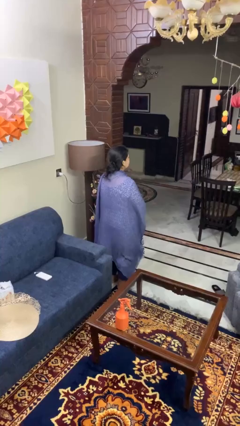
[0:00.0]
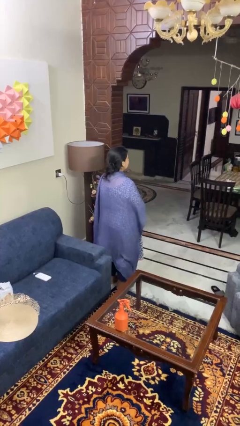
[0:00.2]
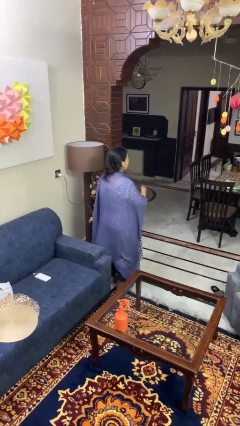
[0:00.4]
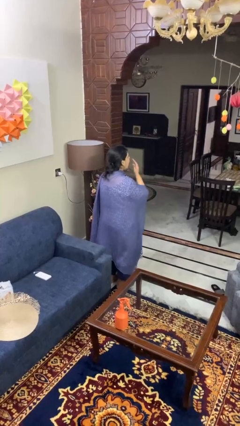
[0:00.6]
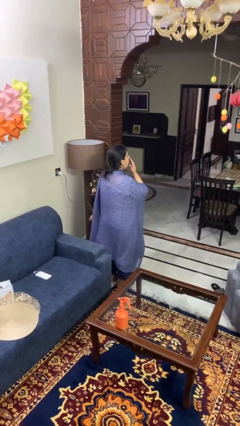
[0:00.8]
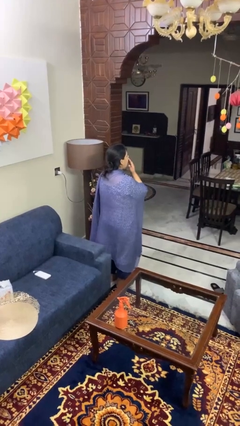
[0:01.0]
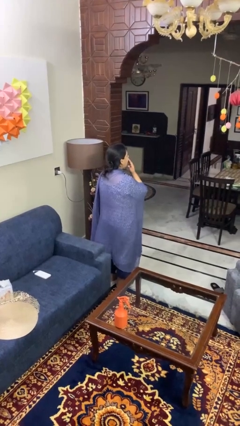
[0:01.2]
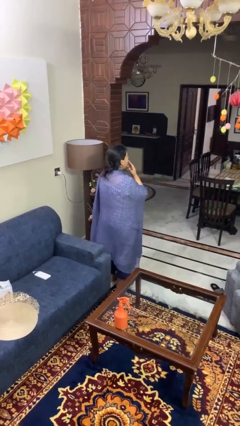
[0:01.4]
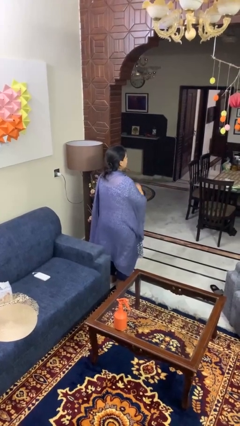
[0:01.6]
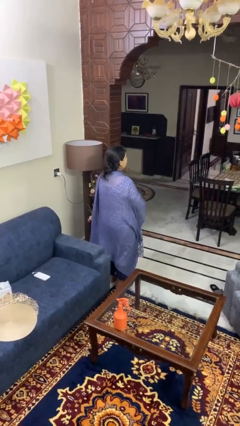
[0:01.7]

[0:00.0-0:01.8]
person yawns

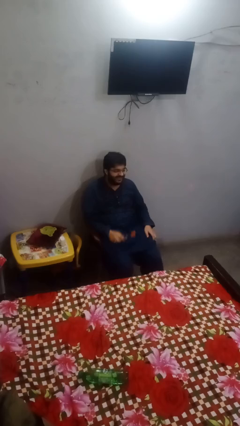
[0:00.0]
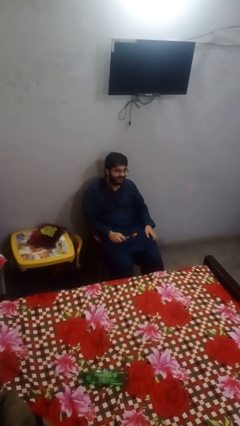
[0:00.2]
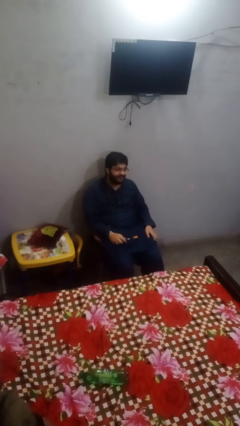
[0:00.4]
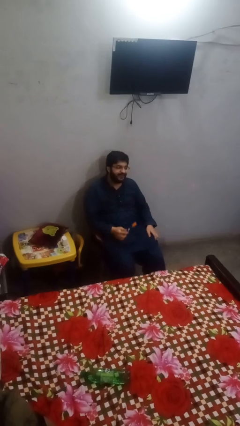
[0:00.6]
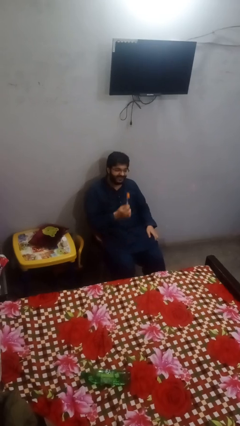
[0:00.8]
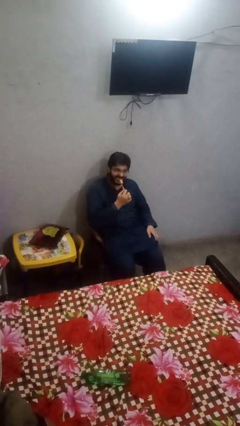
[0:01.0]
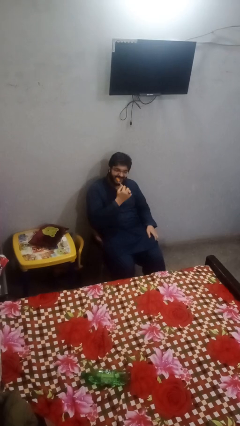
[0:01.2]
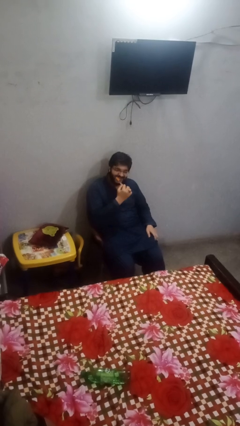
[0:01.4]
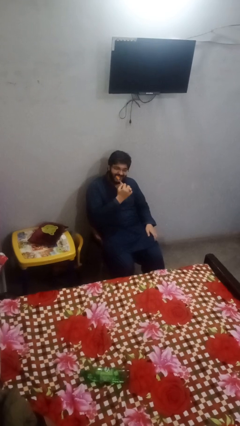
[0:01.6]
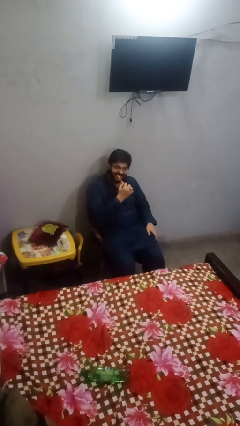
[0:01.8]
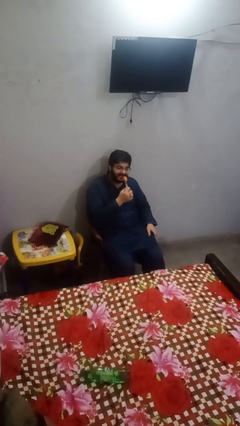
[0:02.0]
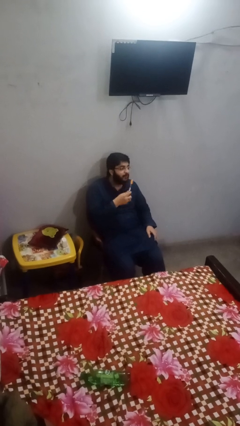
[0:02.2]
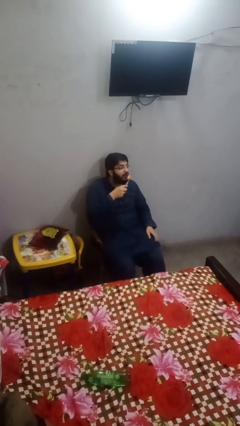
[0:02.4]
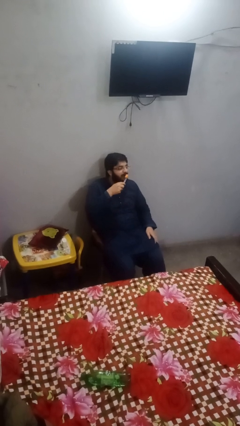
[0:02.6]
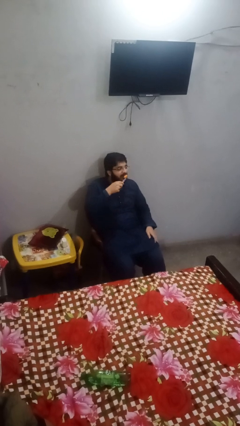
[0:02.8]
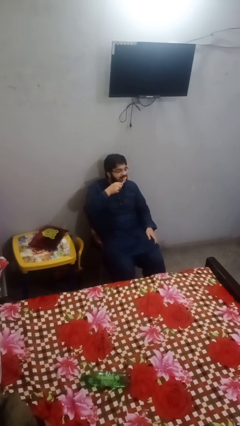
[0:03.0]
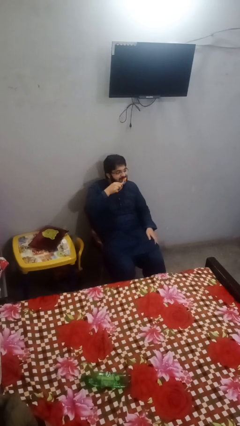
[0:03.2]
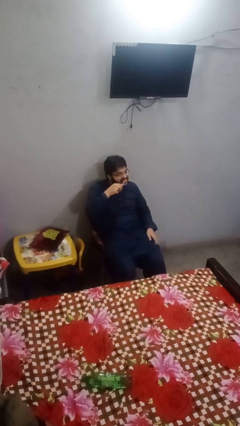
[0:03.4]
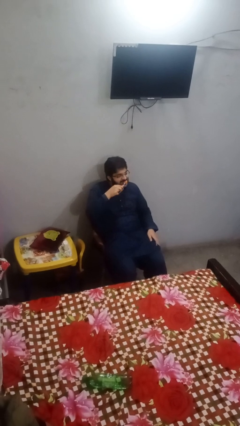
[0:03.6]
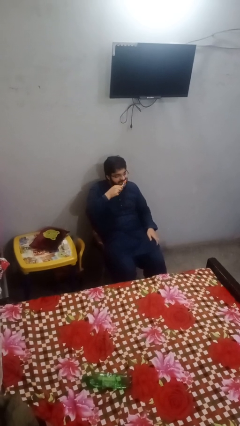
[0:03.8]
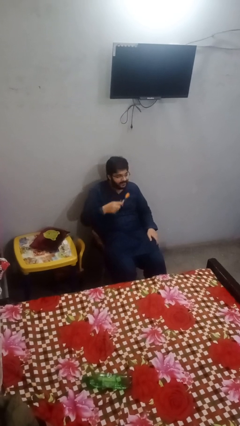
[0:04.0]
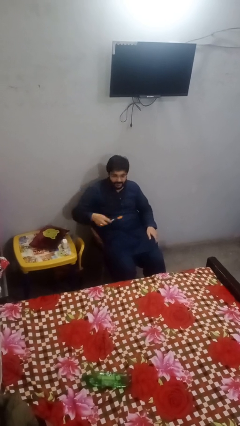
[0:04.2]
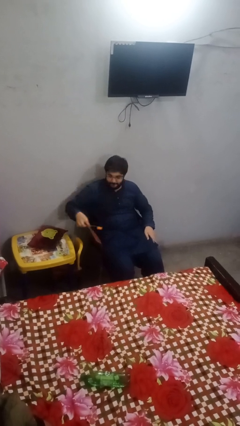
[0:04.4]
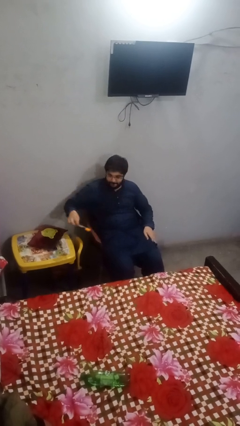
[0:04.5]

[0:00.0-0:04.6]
person brushes teeth

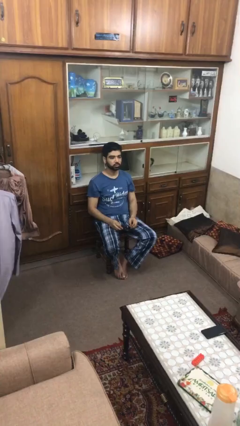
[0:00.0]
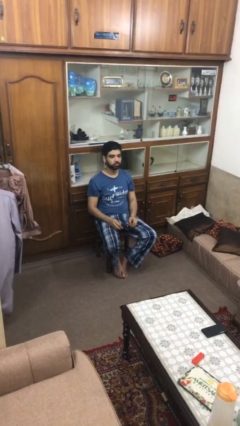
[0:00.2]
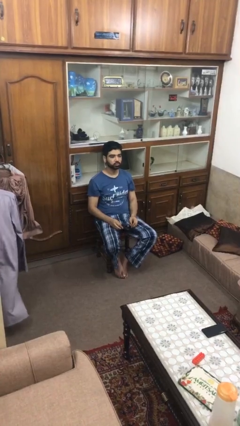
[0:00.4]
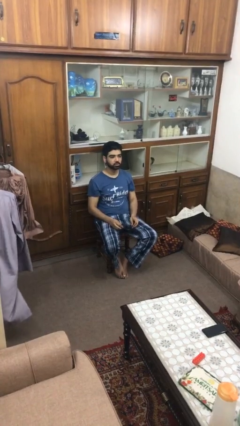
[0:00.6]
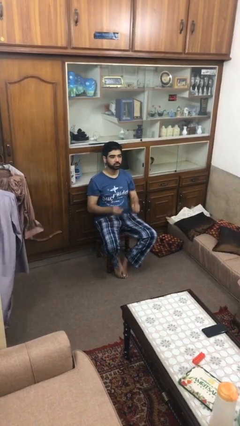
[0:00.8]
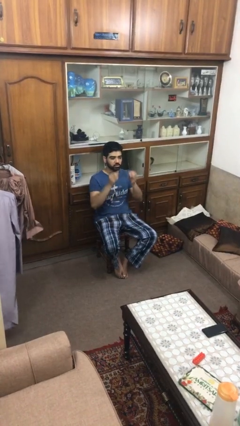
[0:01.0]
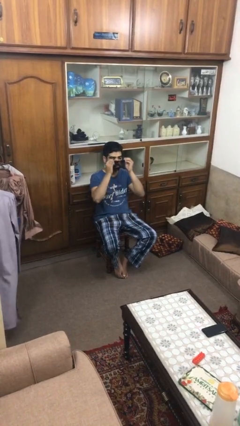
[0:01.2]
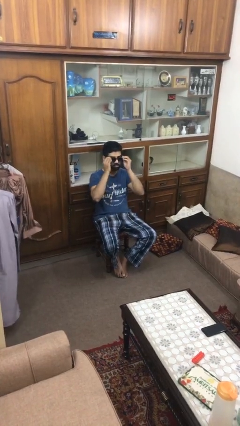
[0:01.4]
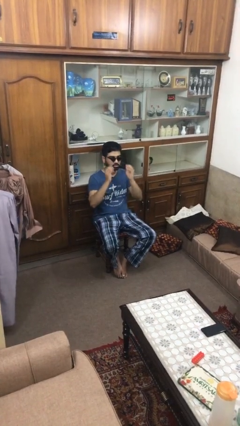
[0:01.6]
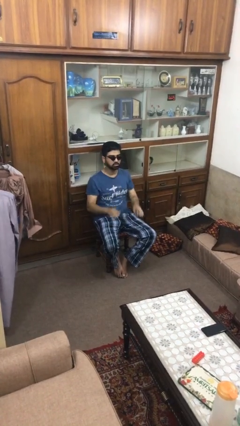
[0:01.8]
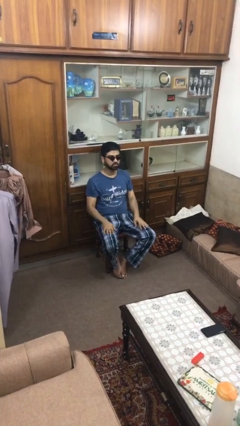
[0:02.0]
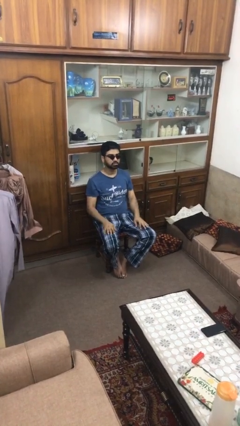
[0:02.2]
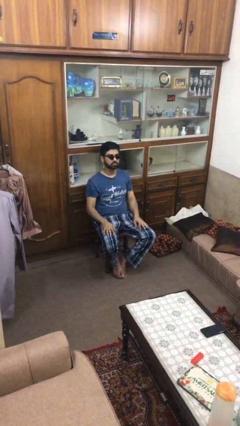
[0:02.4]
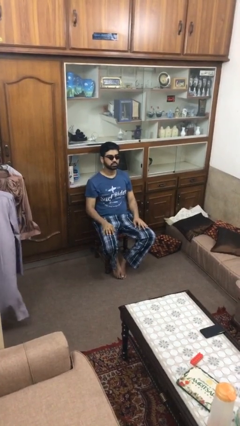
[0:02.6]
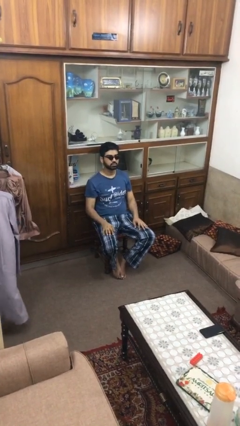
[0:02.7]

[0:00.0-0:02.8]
person puts on sunglasses

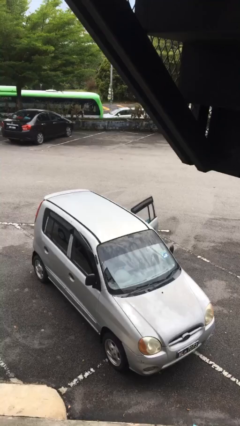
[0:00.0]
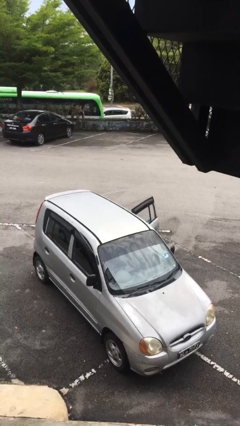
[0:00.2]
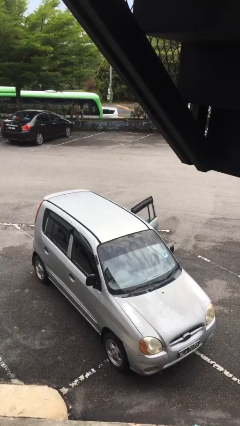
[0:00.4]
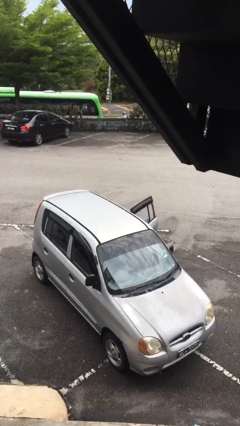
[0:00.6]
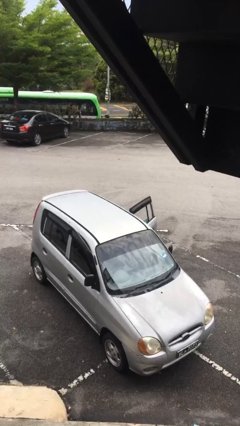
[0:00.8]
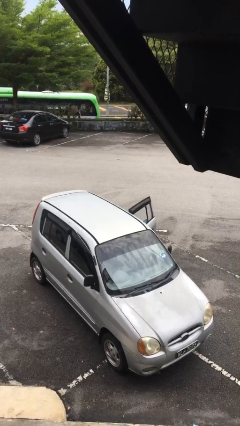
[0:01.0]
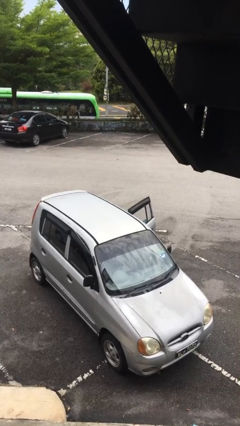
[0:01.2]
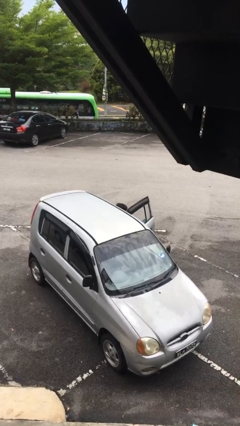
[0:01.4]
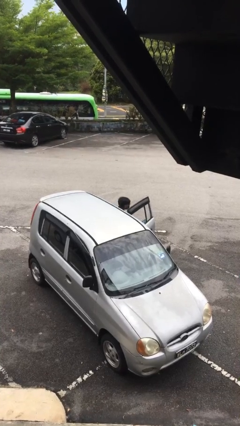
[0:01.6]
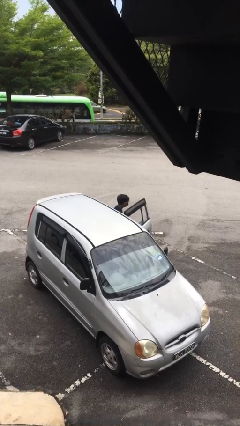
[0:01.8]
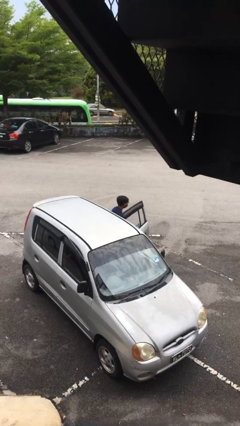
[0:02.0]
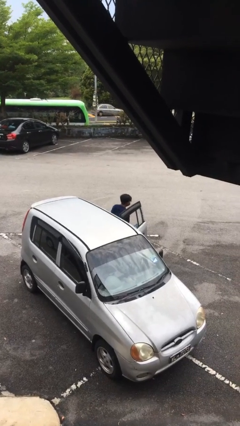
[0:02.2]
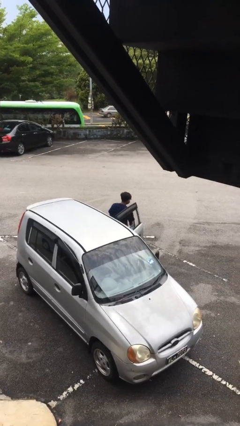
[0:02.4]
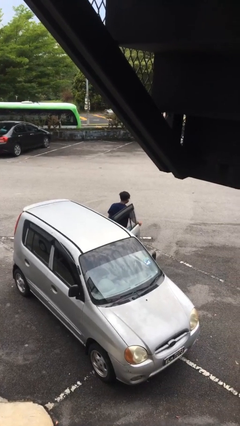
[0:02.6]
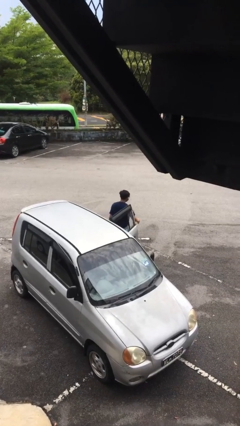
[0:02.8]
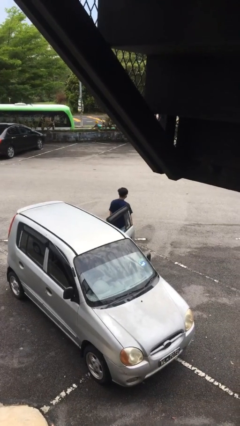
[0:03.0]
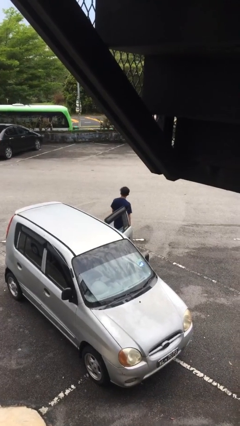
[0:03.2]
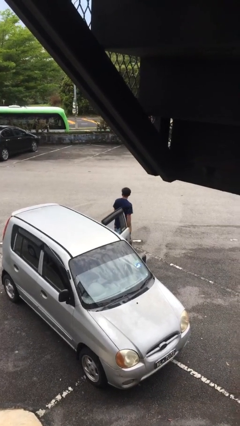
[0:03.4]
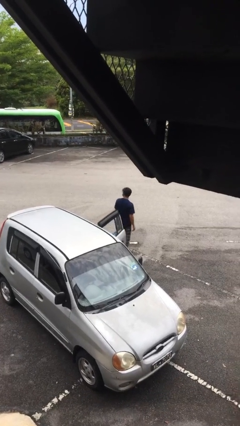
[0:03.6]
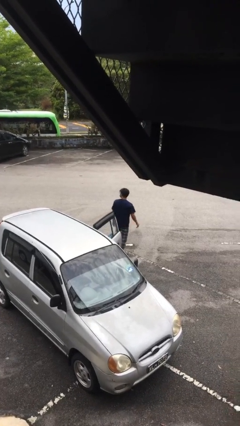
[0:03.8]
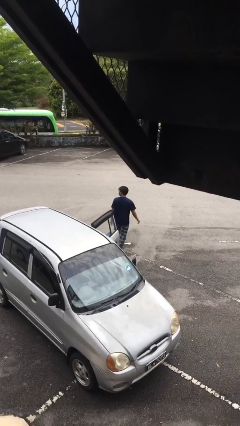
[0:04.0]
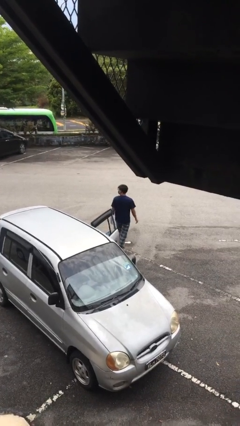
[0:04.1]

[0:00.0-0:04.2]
person exits car

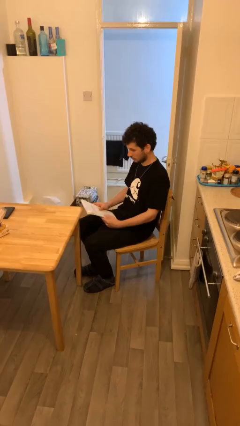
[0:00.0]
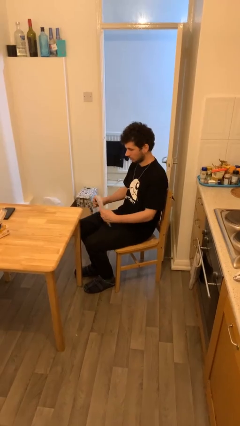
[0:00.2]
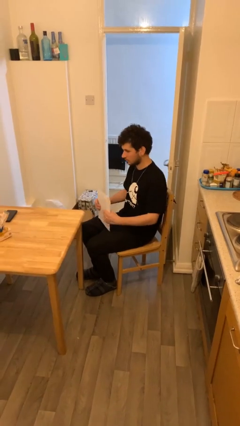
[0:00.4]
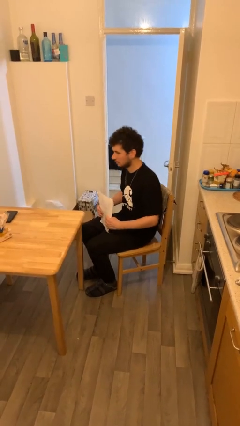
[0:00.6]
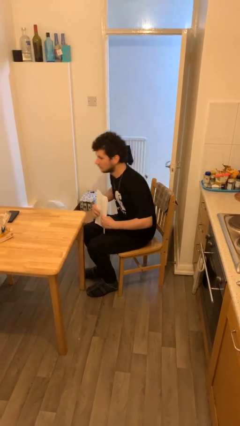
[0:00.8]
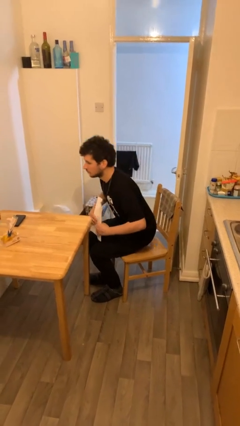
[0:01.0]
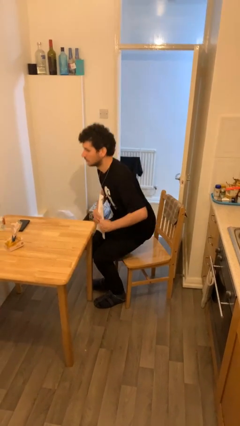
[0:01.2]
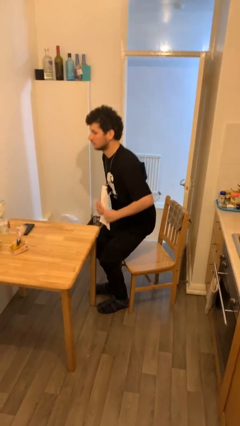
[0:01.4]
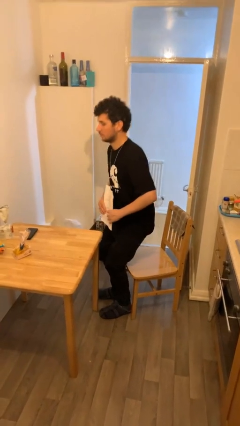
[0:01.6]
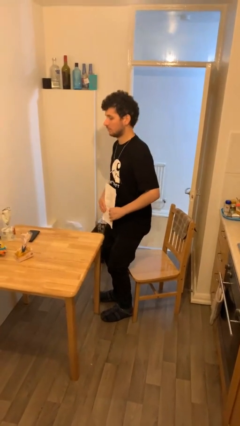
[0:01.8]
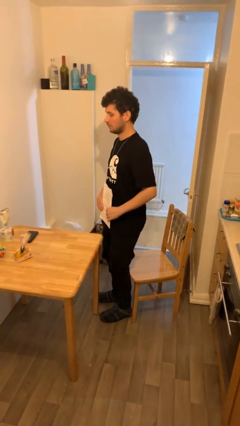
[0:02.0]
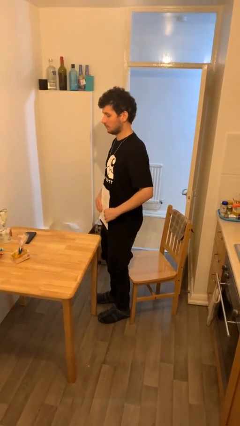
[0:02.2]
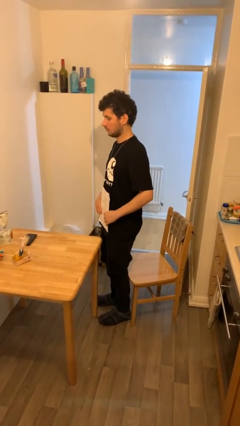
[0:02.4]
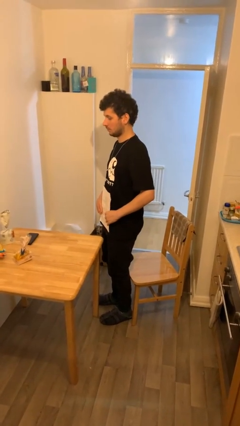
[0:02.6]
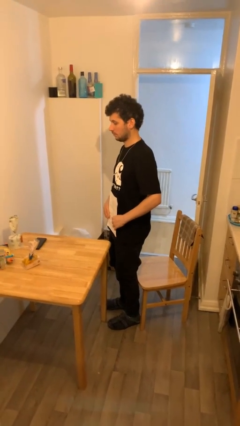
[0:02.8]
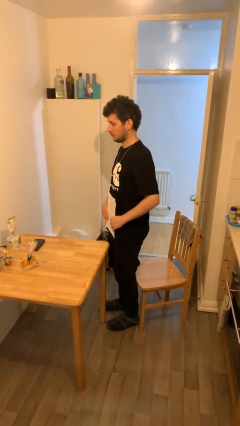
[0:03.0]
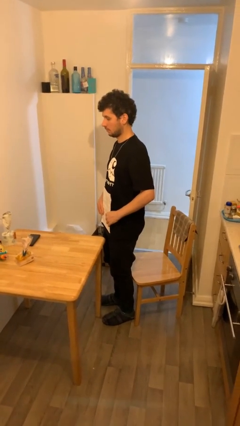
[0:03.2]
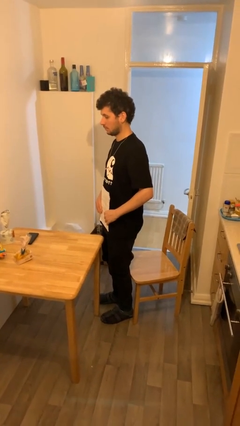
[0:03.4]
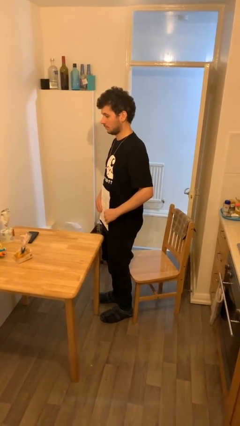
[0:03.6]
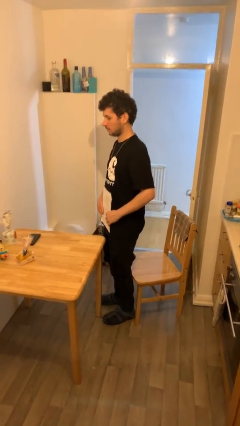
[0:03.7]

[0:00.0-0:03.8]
person stands up

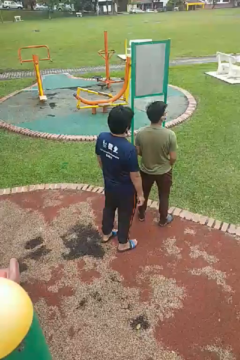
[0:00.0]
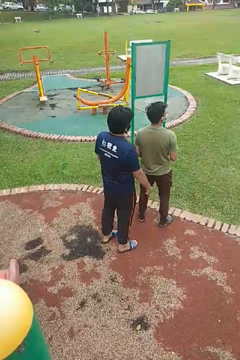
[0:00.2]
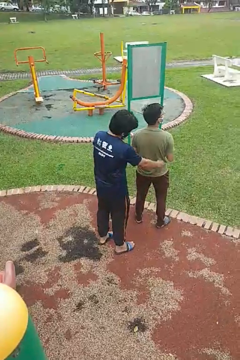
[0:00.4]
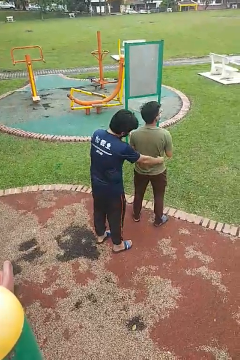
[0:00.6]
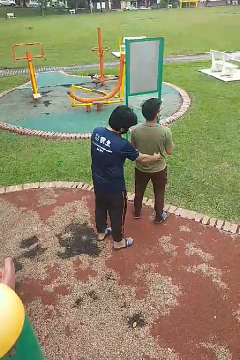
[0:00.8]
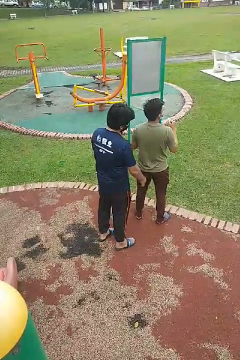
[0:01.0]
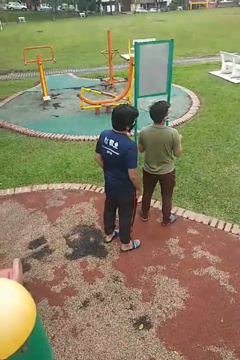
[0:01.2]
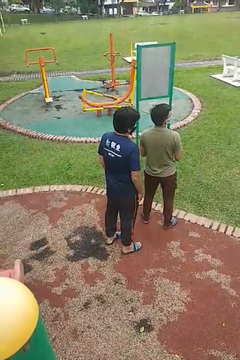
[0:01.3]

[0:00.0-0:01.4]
person tickles person
